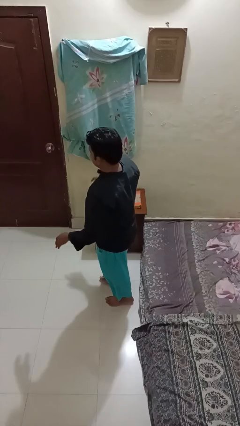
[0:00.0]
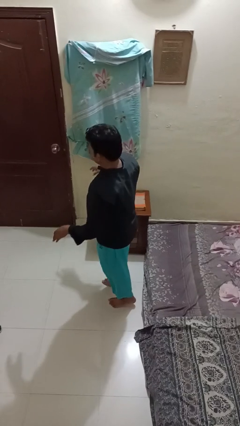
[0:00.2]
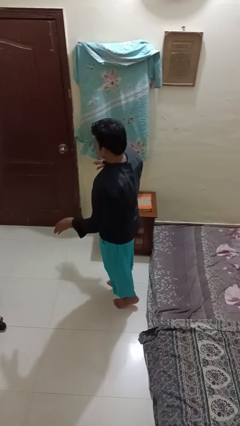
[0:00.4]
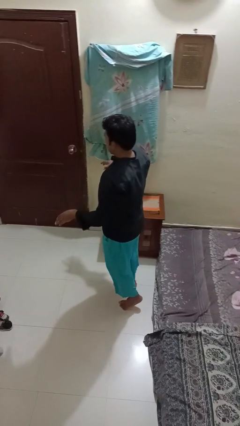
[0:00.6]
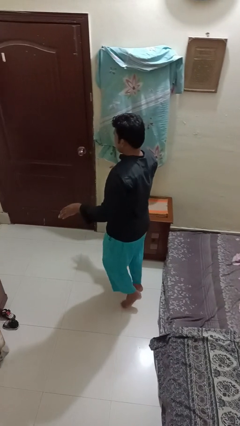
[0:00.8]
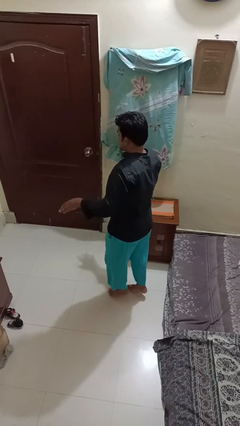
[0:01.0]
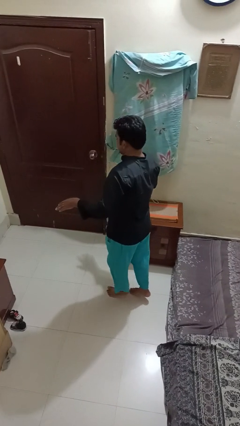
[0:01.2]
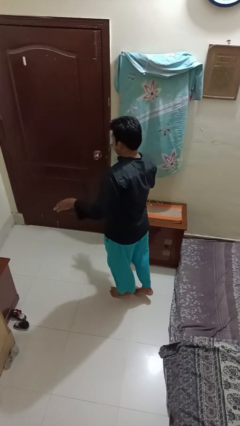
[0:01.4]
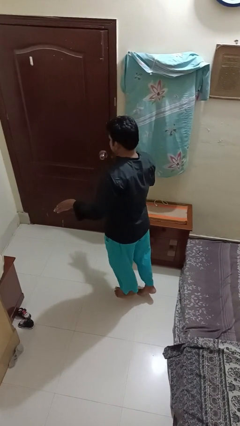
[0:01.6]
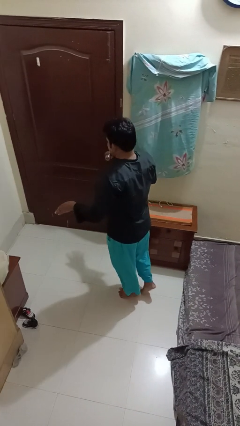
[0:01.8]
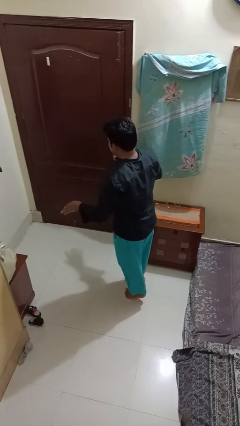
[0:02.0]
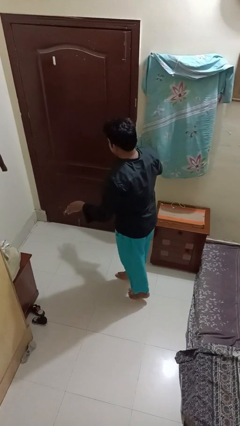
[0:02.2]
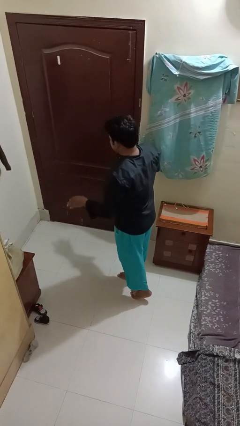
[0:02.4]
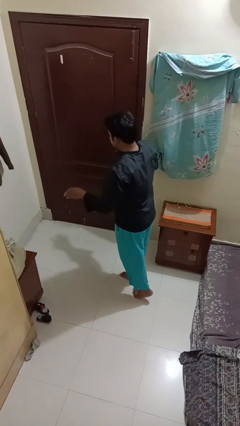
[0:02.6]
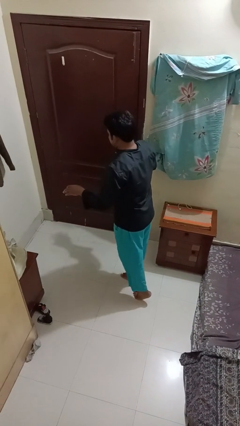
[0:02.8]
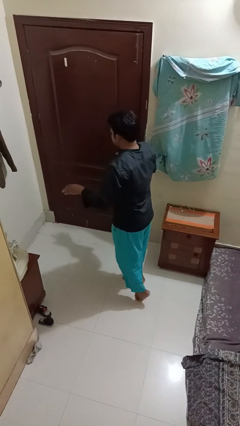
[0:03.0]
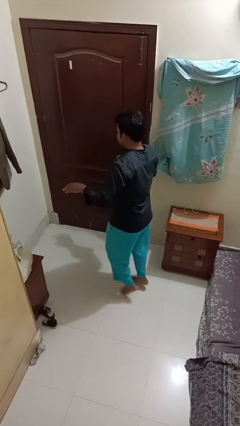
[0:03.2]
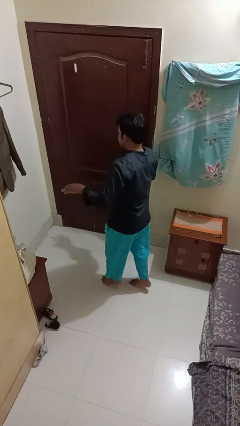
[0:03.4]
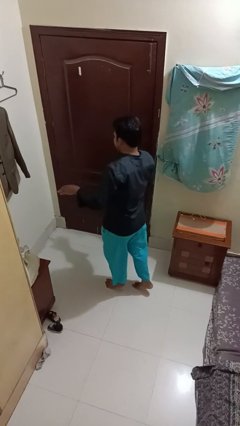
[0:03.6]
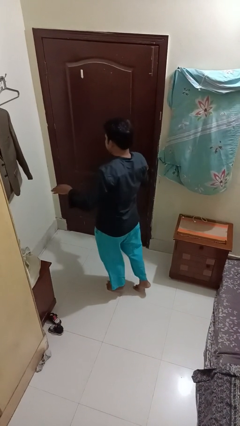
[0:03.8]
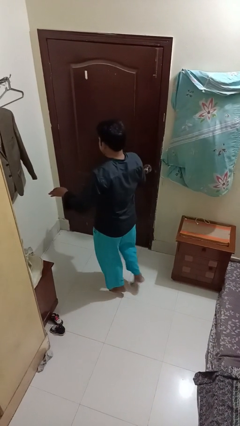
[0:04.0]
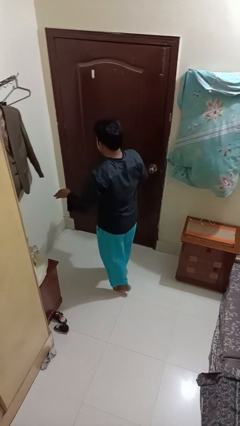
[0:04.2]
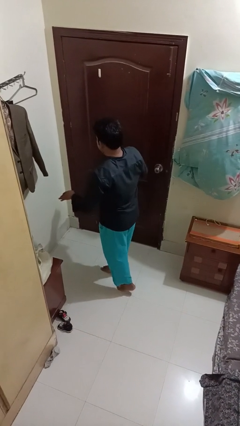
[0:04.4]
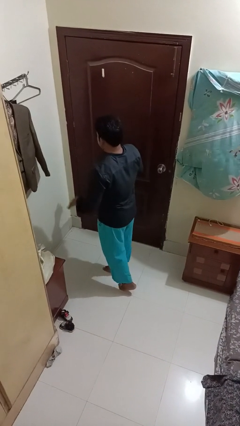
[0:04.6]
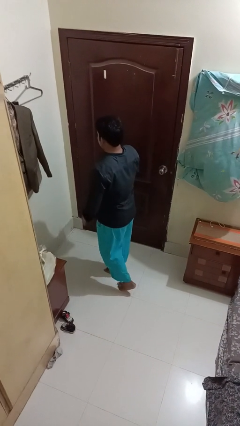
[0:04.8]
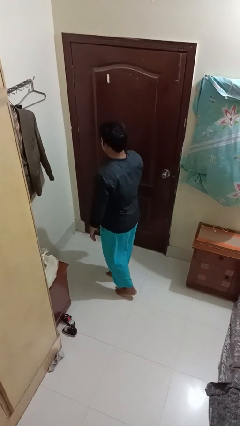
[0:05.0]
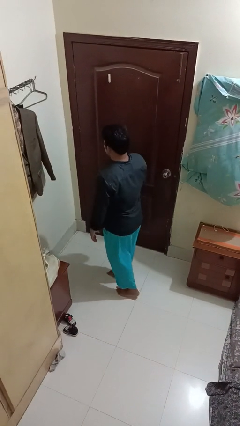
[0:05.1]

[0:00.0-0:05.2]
person walks tiptoe

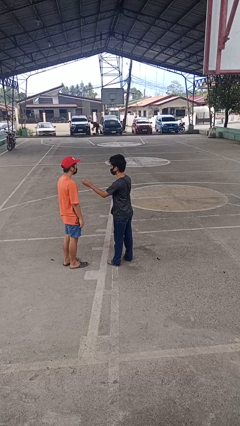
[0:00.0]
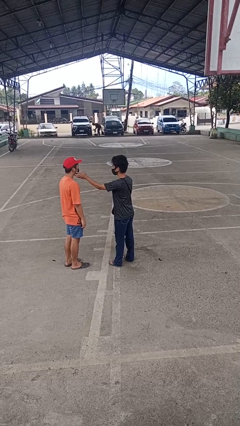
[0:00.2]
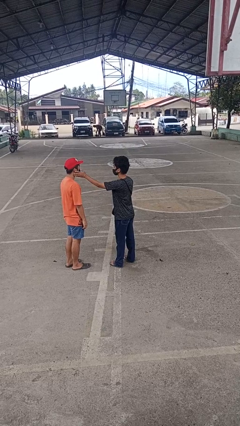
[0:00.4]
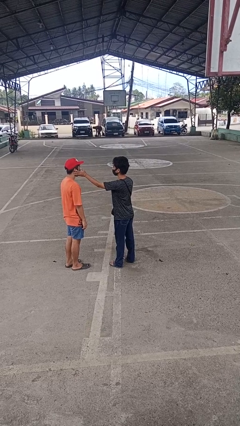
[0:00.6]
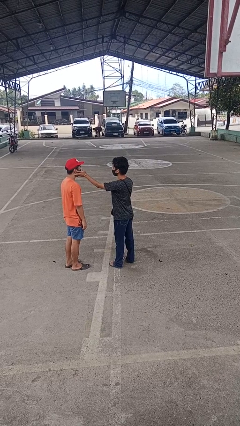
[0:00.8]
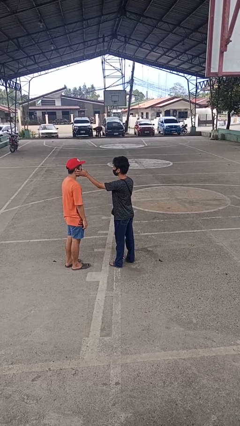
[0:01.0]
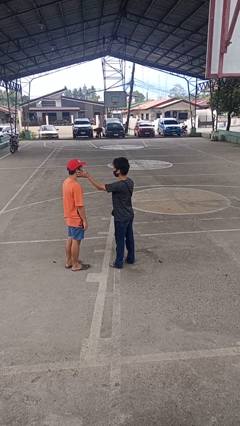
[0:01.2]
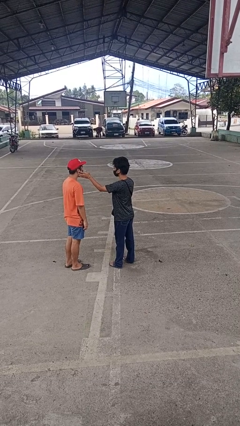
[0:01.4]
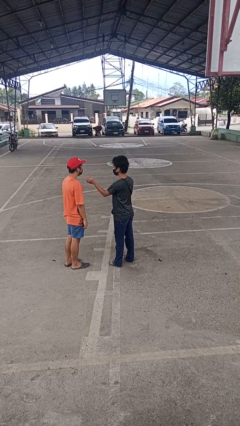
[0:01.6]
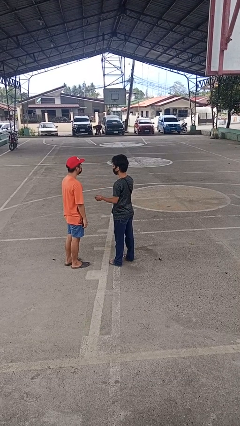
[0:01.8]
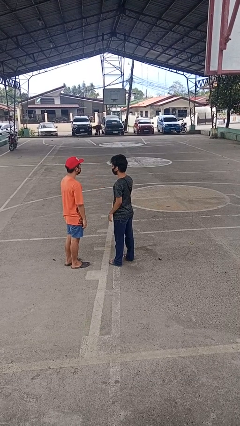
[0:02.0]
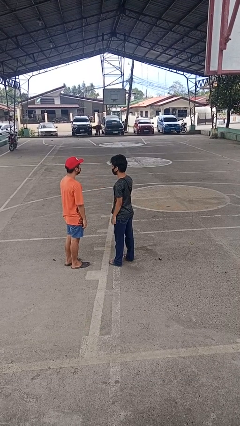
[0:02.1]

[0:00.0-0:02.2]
person touches face of person

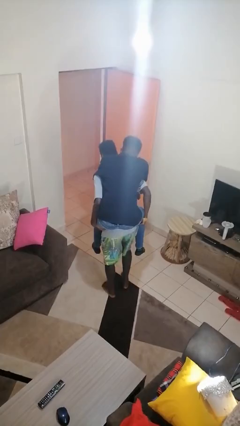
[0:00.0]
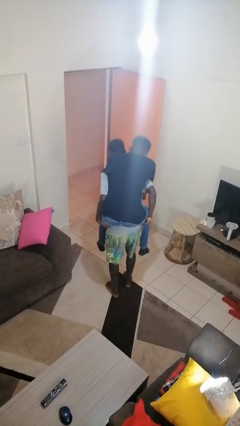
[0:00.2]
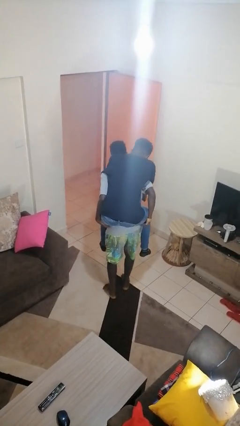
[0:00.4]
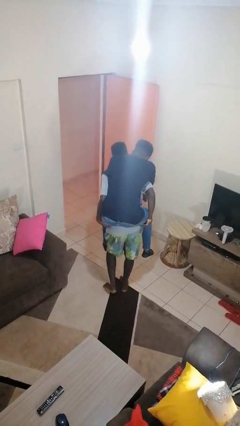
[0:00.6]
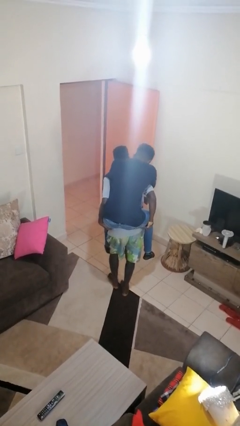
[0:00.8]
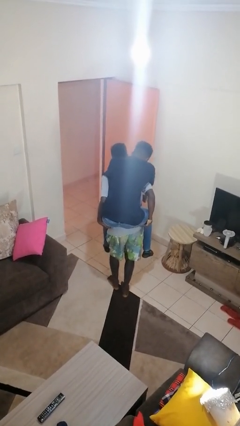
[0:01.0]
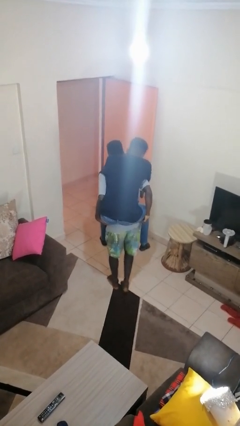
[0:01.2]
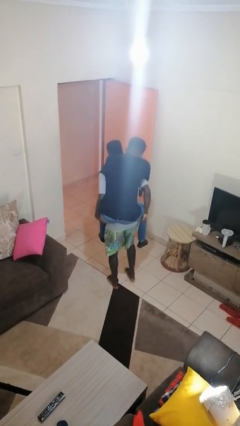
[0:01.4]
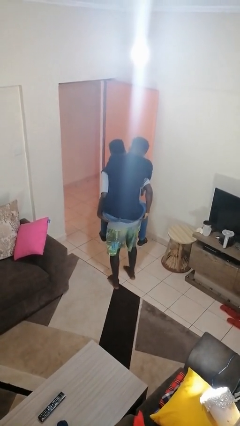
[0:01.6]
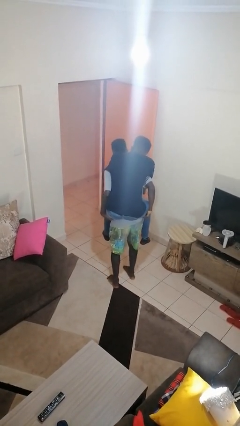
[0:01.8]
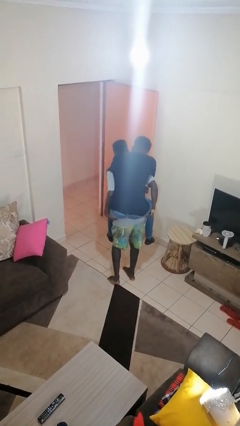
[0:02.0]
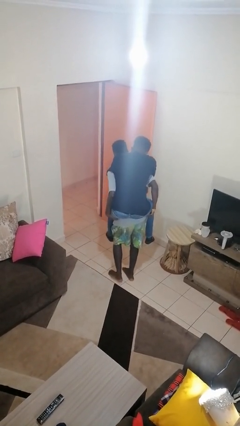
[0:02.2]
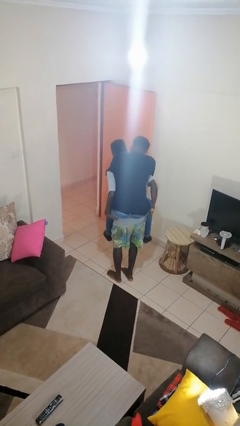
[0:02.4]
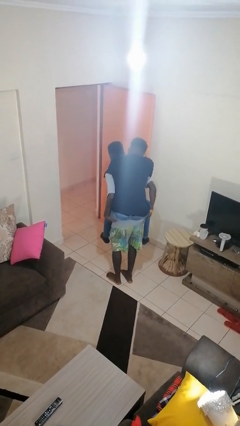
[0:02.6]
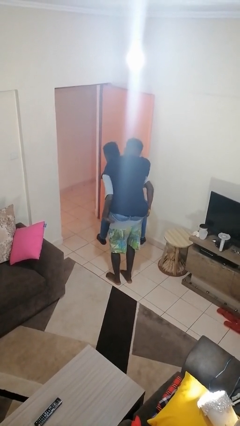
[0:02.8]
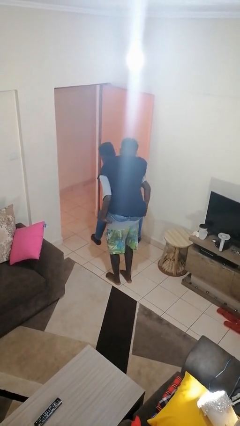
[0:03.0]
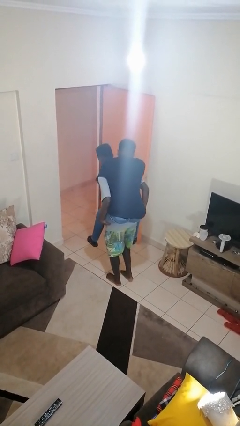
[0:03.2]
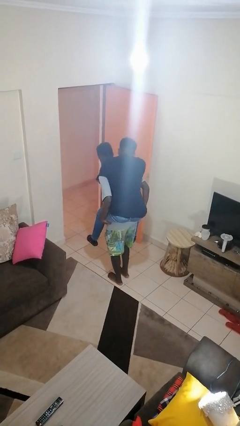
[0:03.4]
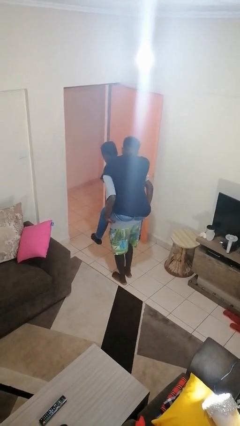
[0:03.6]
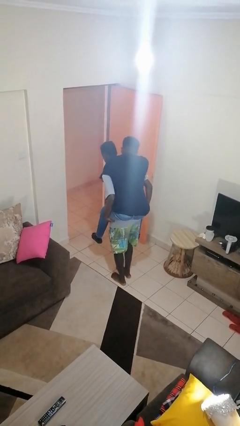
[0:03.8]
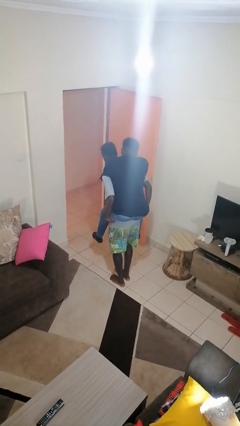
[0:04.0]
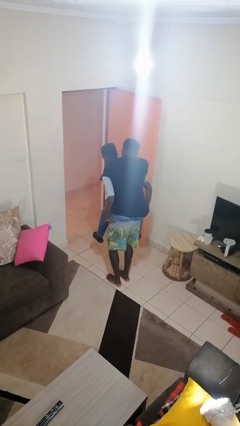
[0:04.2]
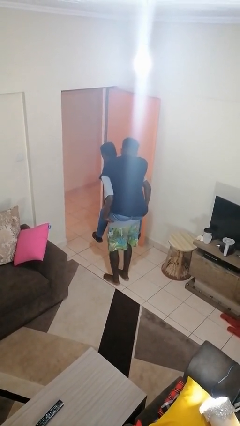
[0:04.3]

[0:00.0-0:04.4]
person carries person on back

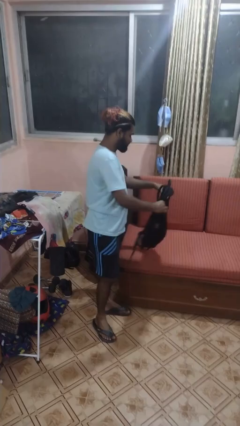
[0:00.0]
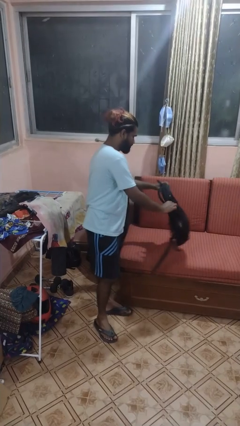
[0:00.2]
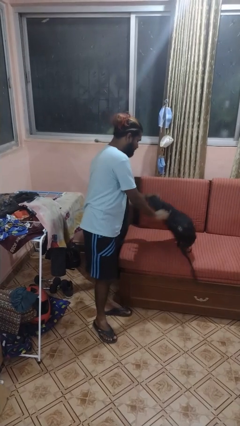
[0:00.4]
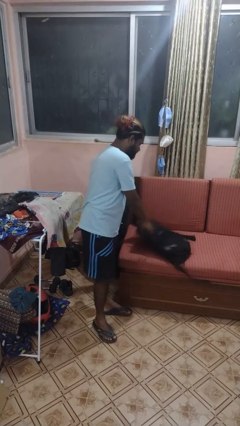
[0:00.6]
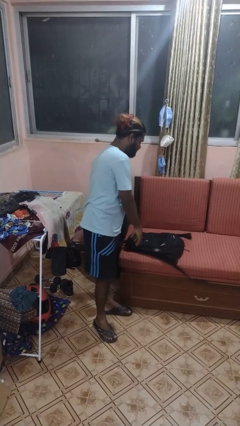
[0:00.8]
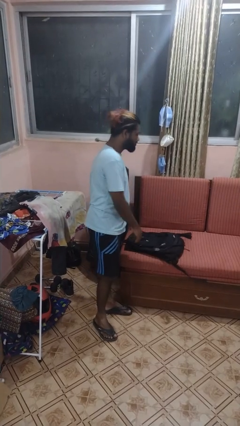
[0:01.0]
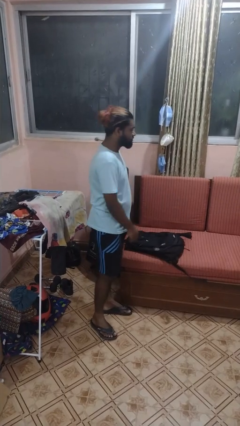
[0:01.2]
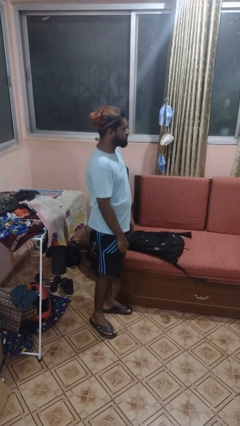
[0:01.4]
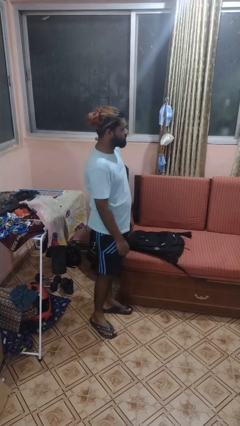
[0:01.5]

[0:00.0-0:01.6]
person puts down object on couch

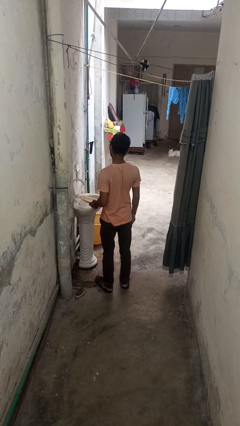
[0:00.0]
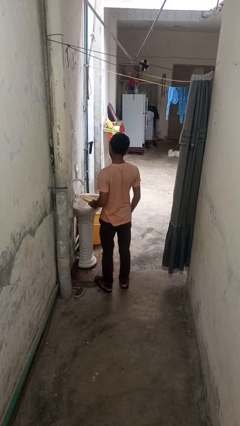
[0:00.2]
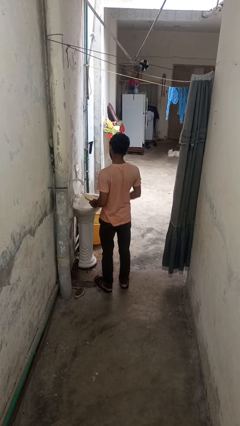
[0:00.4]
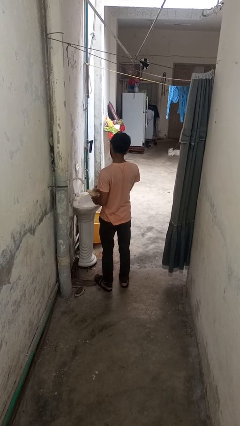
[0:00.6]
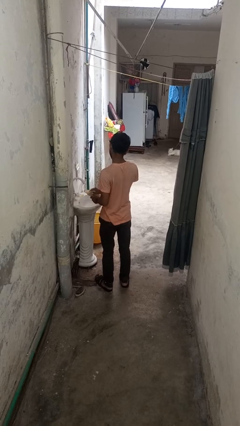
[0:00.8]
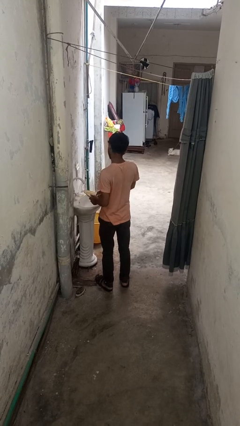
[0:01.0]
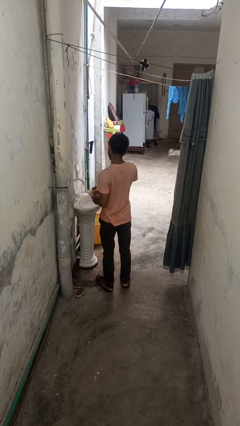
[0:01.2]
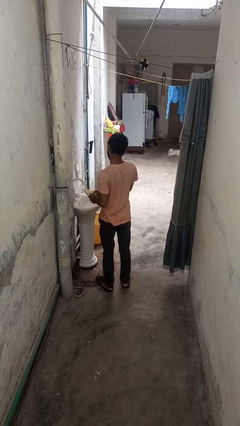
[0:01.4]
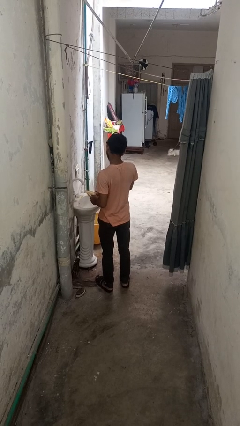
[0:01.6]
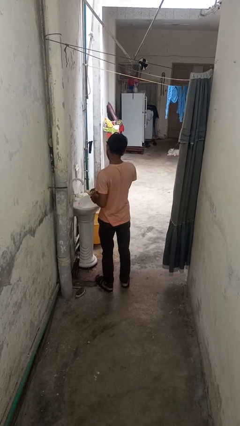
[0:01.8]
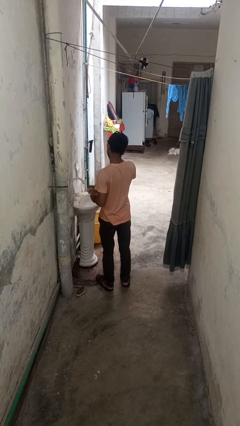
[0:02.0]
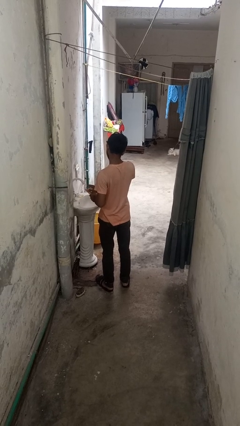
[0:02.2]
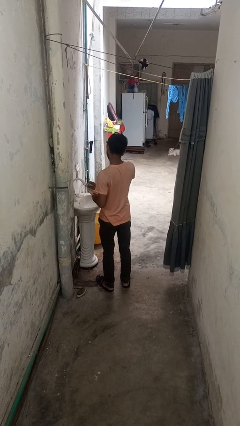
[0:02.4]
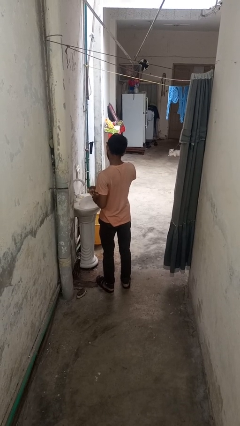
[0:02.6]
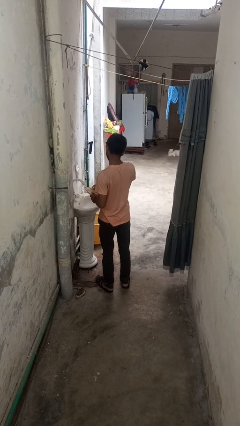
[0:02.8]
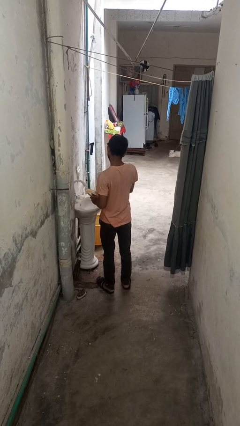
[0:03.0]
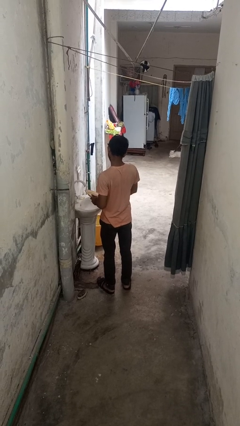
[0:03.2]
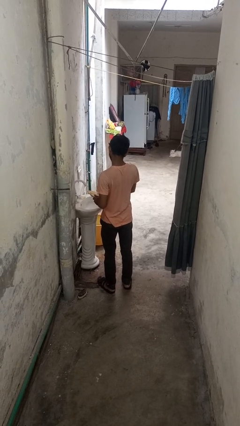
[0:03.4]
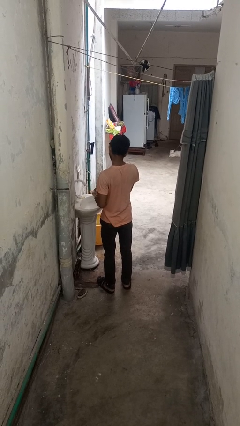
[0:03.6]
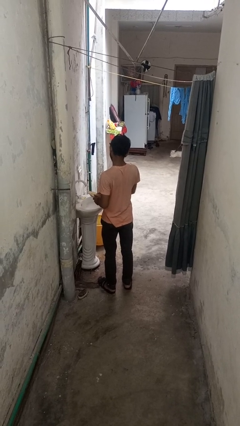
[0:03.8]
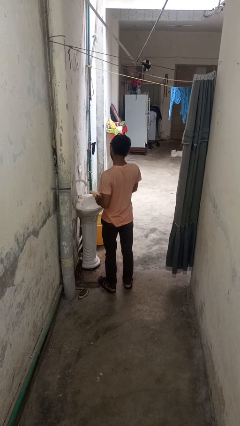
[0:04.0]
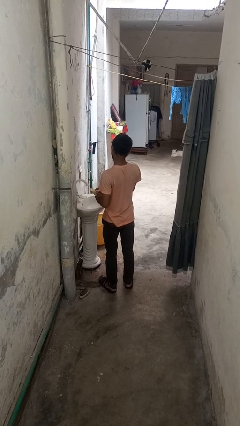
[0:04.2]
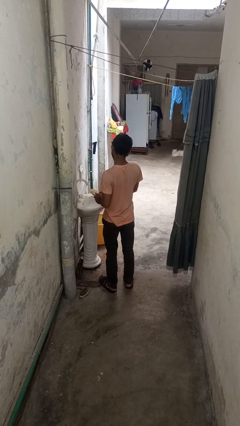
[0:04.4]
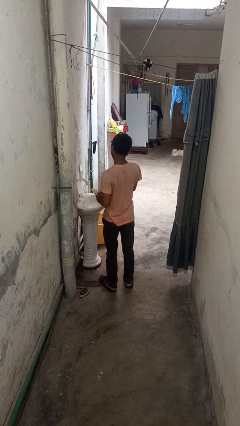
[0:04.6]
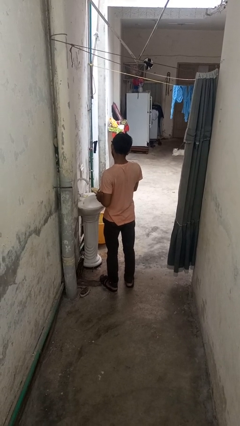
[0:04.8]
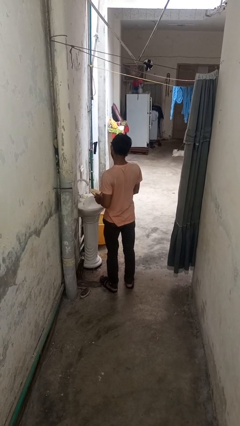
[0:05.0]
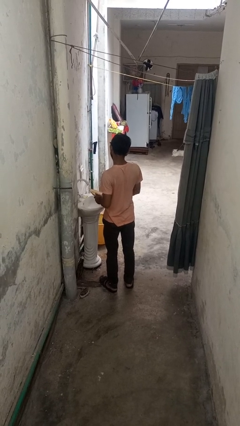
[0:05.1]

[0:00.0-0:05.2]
person dries dish
